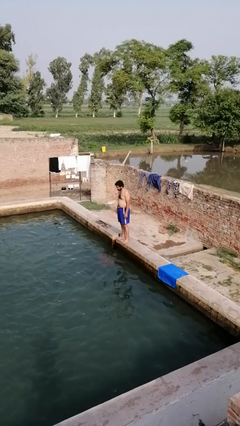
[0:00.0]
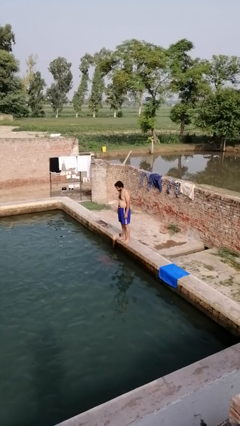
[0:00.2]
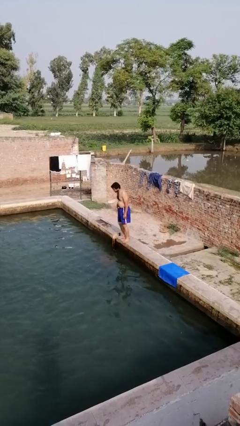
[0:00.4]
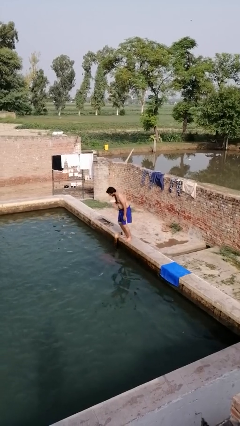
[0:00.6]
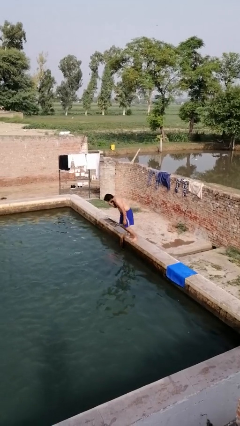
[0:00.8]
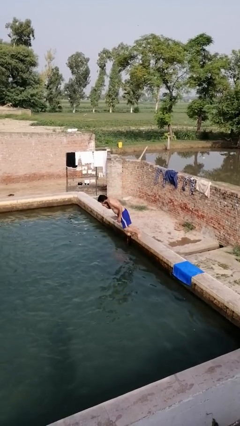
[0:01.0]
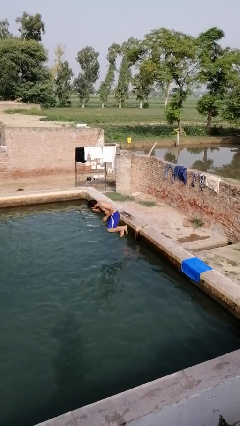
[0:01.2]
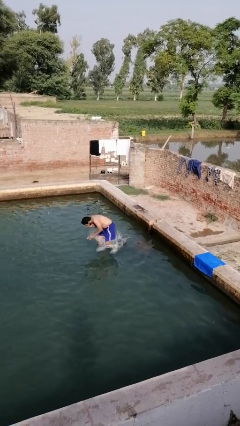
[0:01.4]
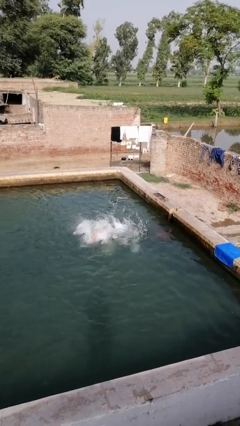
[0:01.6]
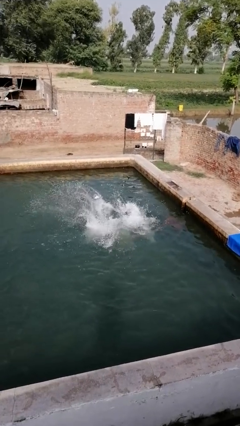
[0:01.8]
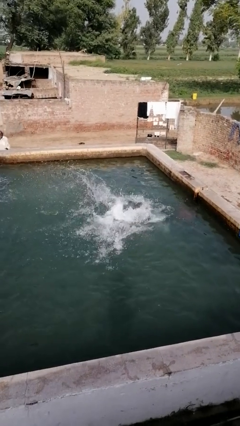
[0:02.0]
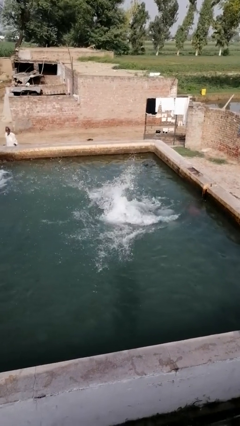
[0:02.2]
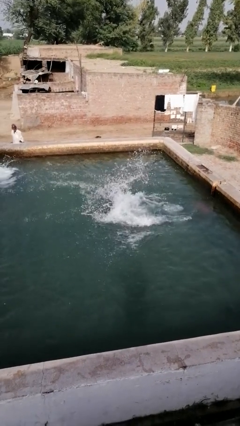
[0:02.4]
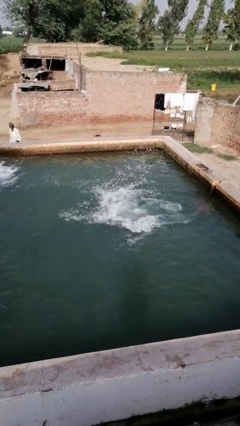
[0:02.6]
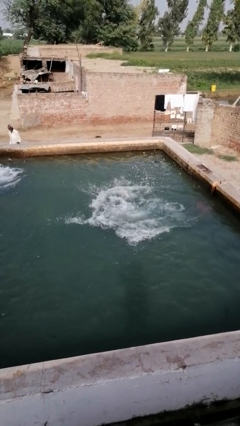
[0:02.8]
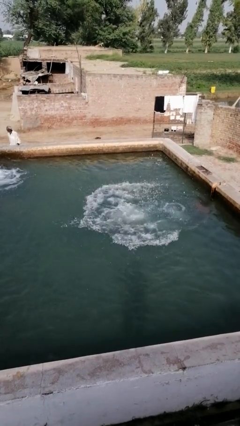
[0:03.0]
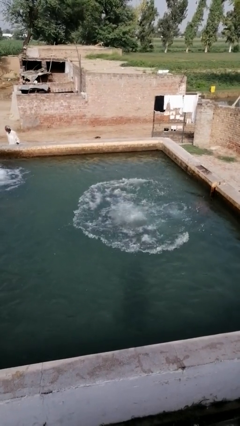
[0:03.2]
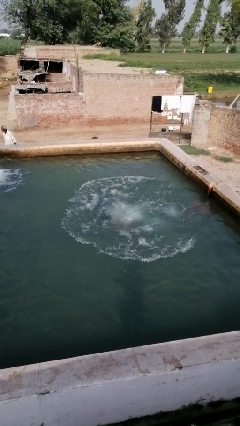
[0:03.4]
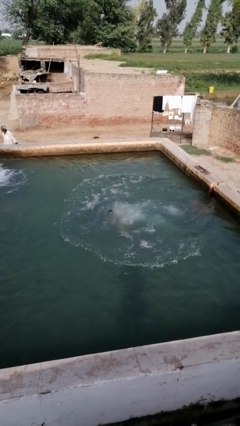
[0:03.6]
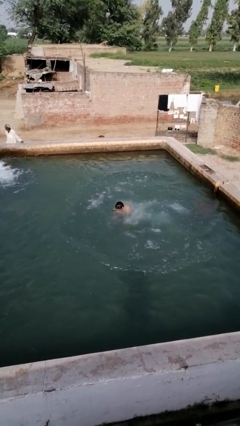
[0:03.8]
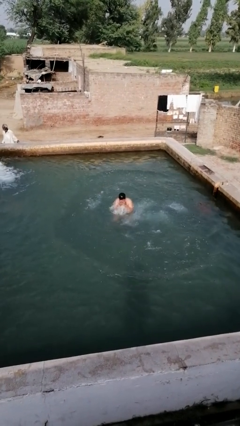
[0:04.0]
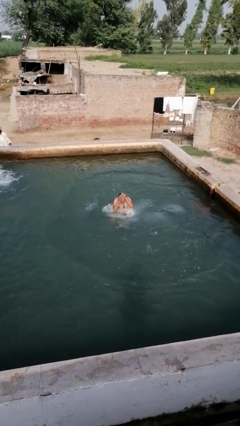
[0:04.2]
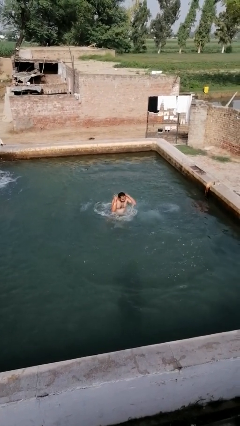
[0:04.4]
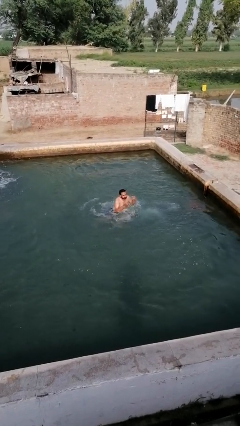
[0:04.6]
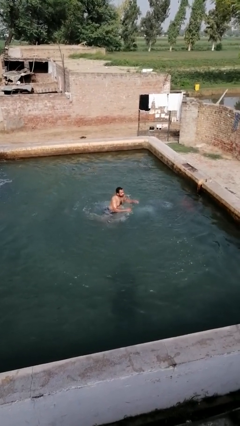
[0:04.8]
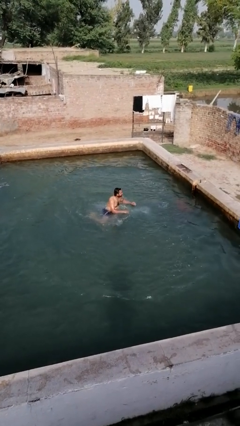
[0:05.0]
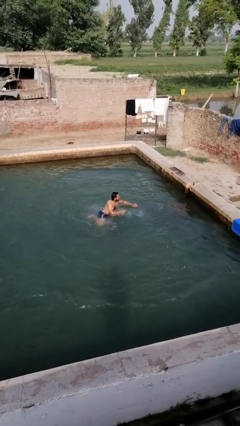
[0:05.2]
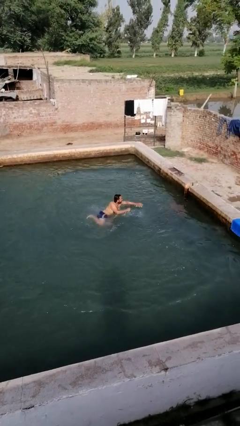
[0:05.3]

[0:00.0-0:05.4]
person jumps into pool

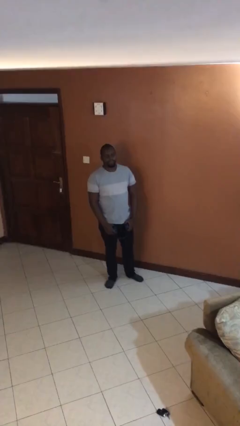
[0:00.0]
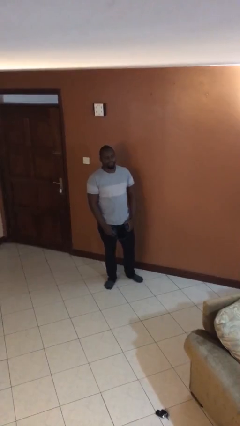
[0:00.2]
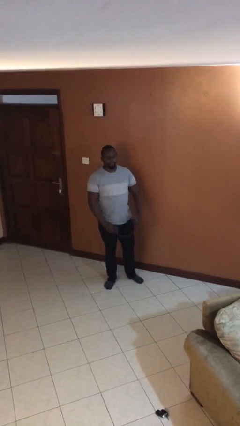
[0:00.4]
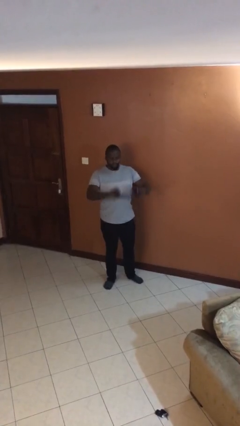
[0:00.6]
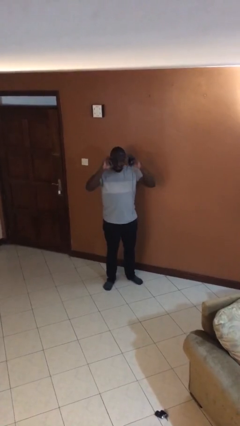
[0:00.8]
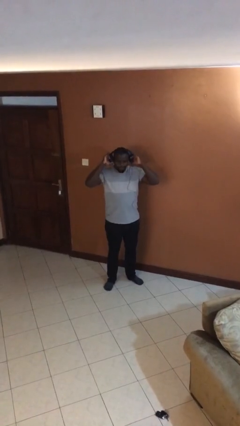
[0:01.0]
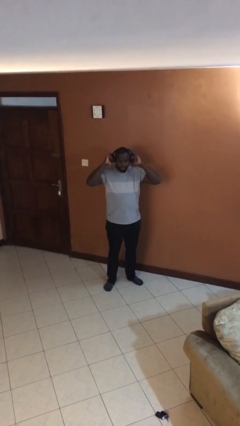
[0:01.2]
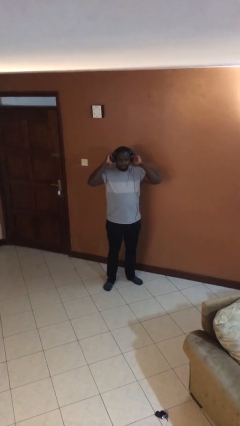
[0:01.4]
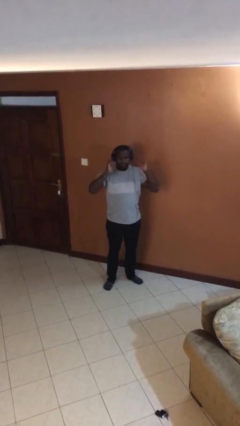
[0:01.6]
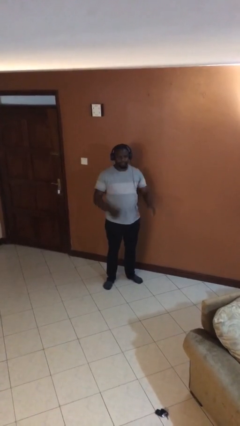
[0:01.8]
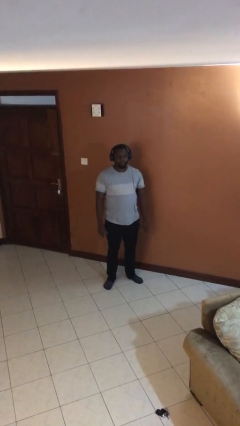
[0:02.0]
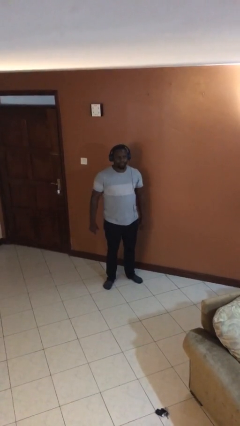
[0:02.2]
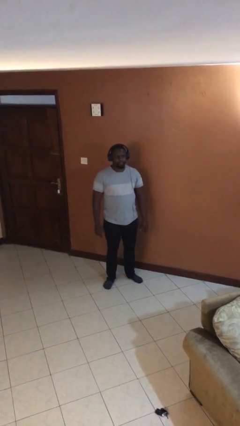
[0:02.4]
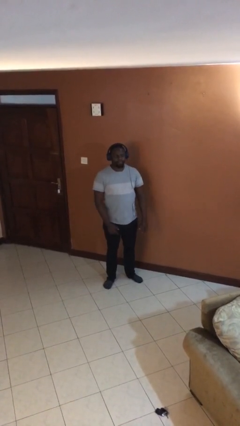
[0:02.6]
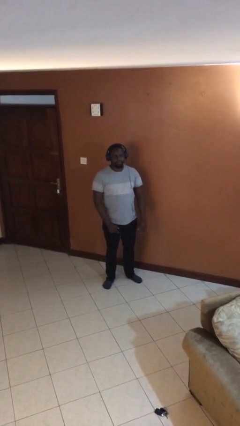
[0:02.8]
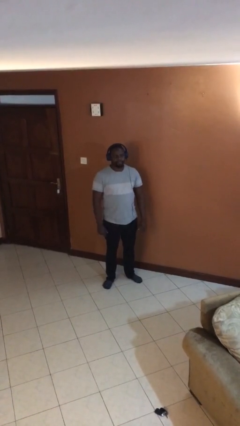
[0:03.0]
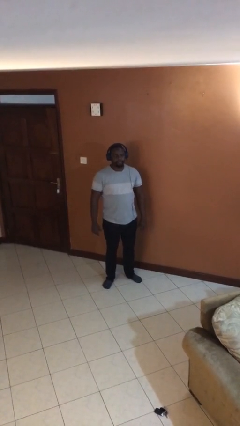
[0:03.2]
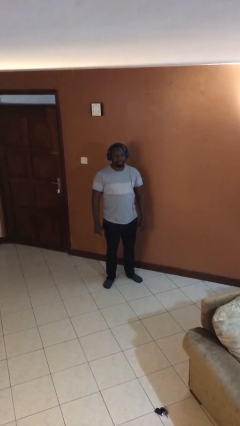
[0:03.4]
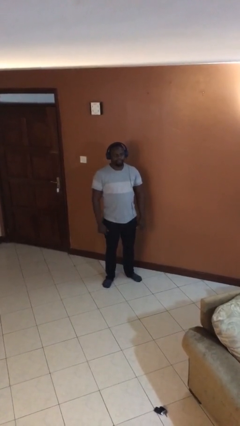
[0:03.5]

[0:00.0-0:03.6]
person puts on headphones

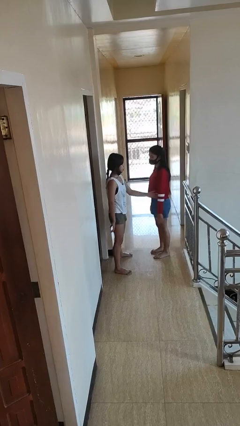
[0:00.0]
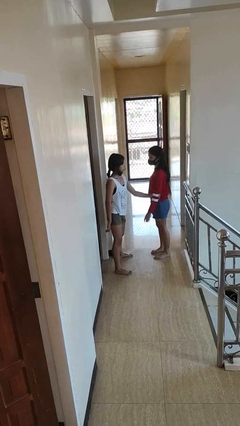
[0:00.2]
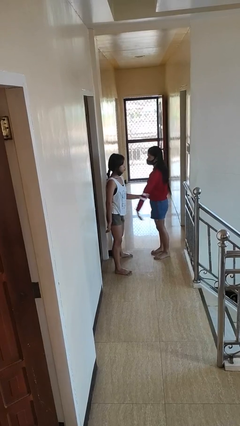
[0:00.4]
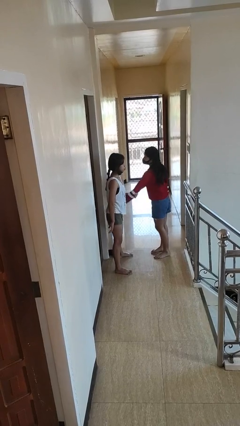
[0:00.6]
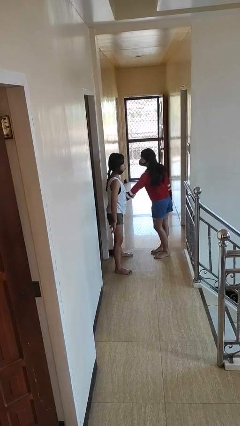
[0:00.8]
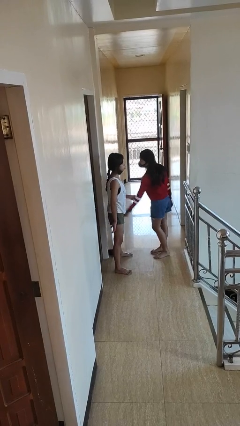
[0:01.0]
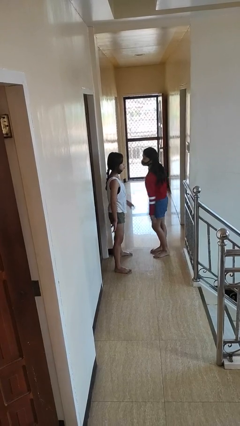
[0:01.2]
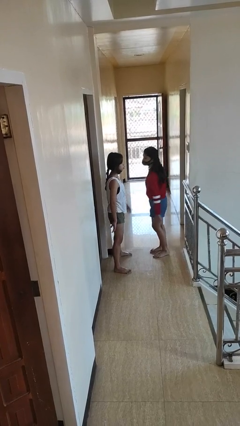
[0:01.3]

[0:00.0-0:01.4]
person grabs person by forearm

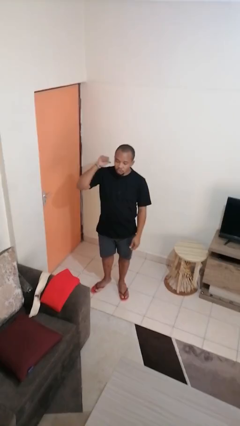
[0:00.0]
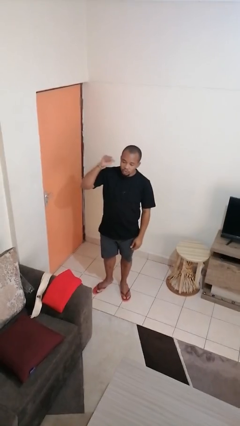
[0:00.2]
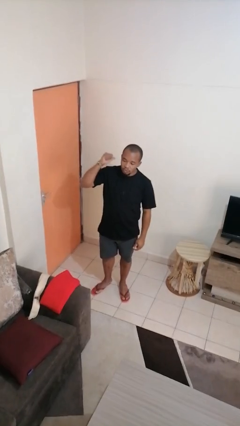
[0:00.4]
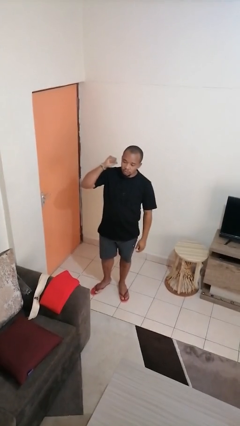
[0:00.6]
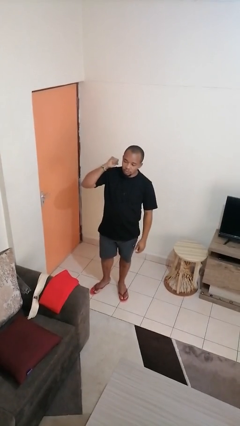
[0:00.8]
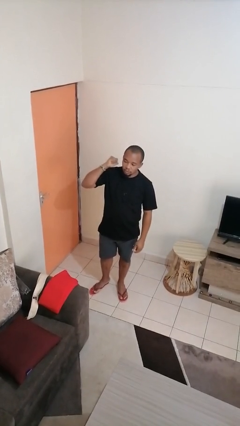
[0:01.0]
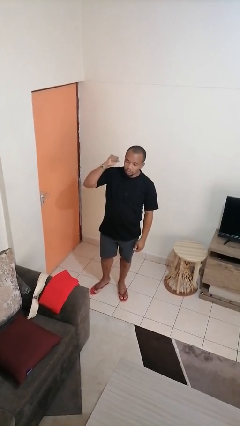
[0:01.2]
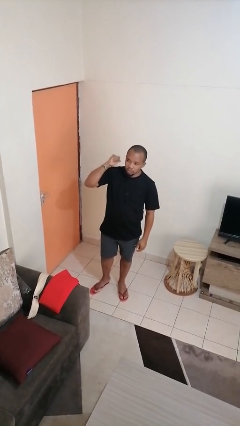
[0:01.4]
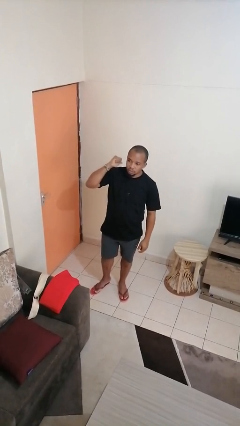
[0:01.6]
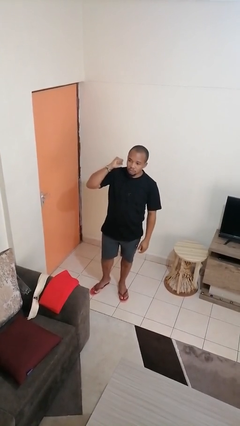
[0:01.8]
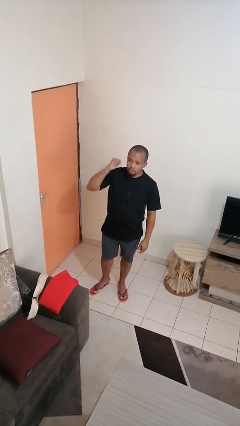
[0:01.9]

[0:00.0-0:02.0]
person gestures behind me

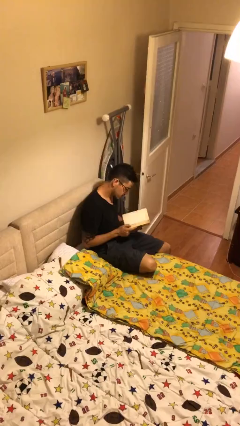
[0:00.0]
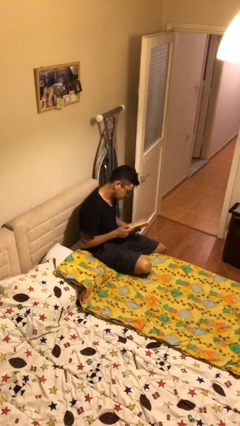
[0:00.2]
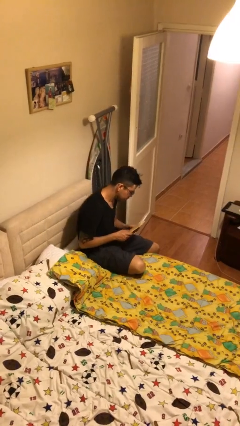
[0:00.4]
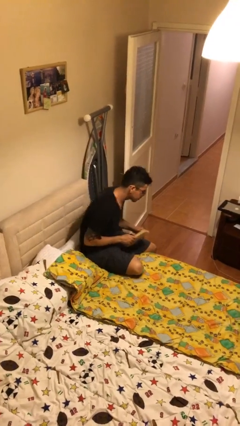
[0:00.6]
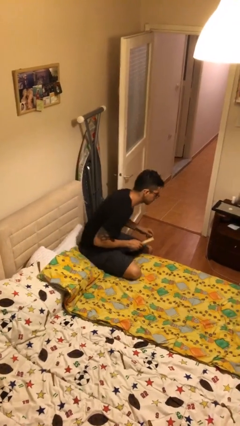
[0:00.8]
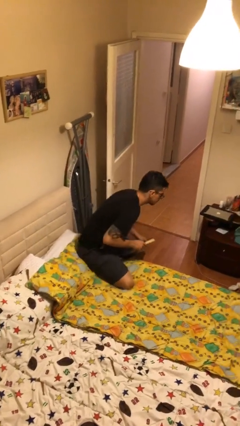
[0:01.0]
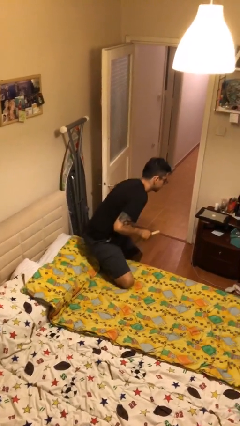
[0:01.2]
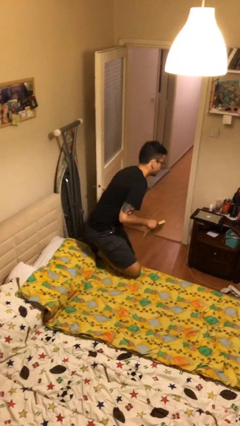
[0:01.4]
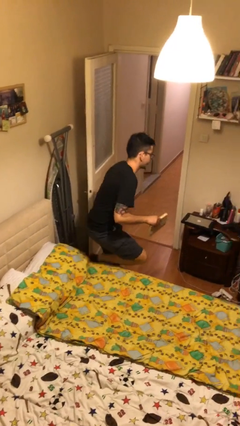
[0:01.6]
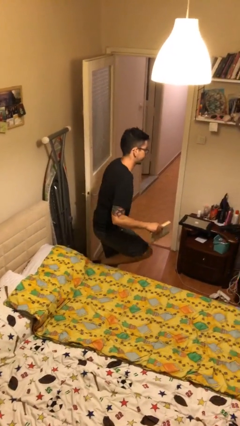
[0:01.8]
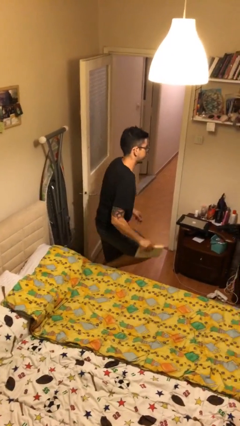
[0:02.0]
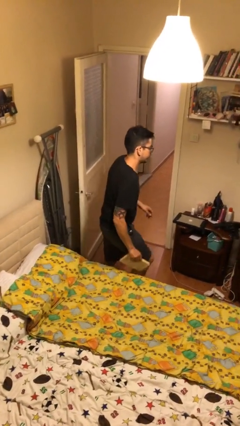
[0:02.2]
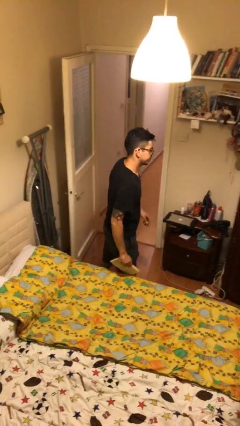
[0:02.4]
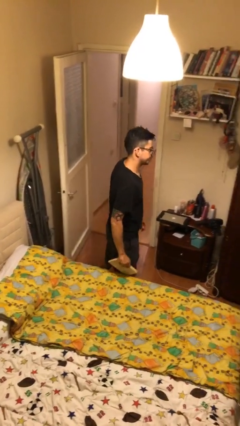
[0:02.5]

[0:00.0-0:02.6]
person stands up

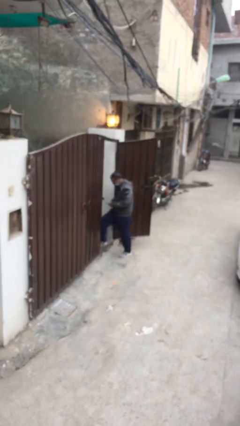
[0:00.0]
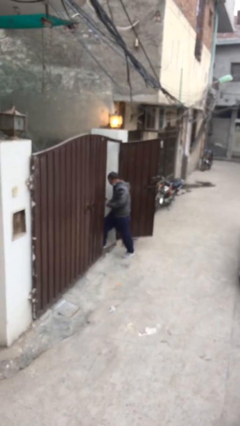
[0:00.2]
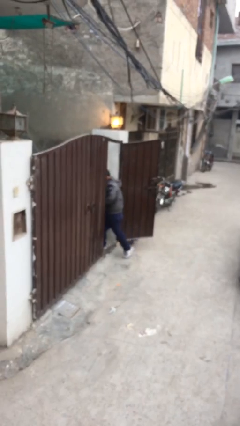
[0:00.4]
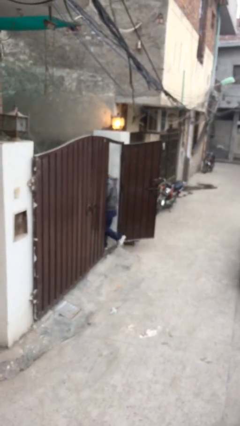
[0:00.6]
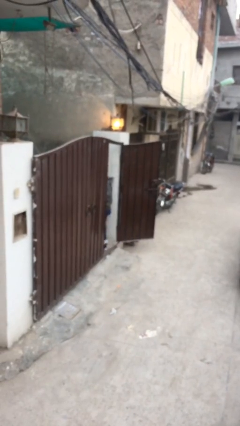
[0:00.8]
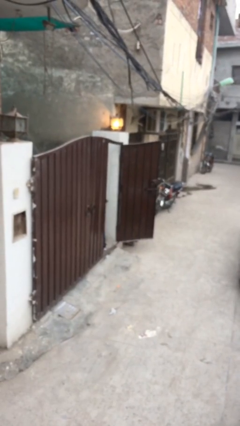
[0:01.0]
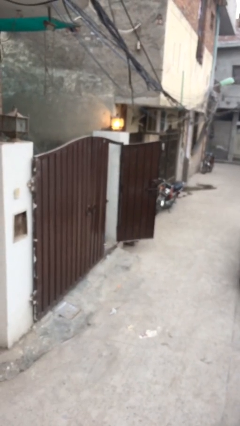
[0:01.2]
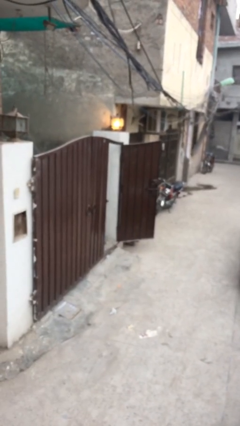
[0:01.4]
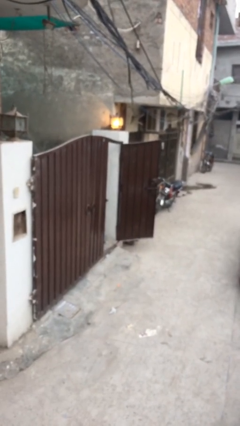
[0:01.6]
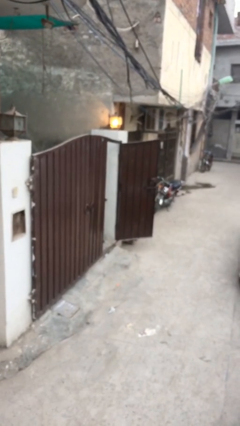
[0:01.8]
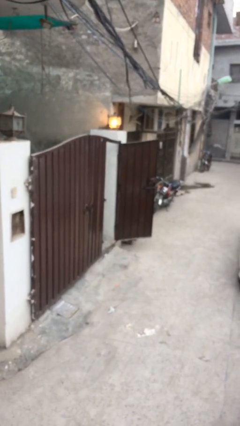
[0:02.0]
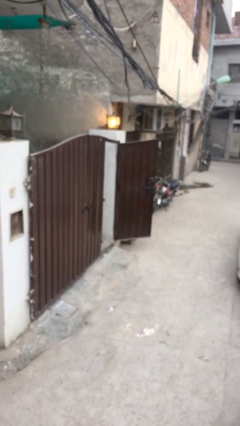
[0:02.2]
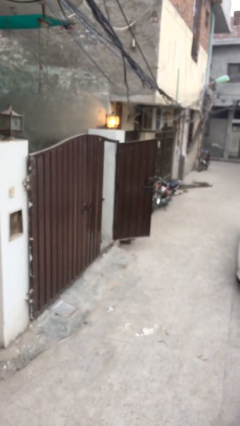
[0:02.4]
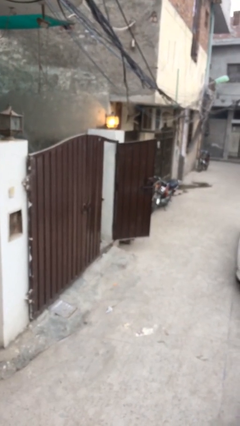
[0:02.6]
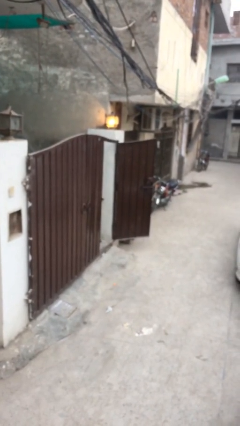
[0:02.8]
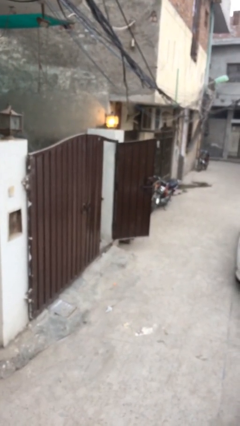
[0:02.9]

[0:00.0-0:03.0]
person exits scene through structure
